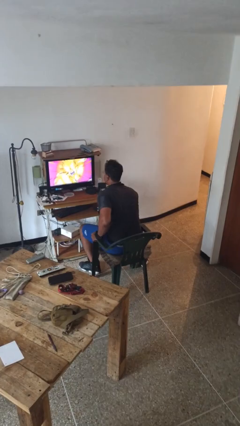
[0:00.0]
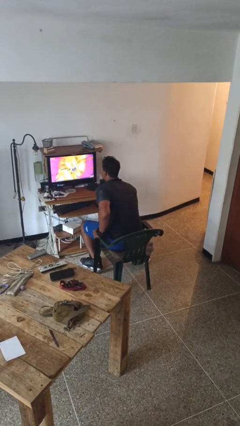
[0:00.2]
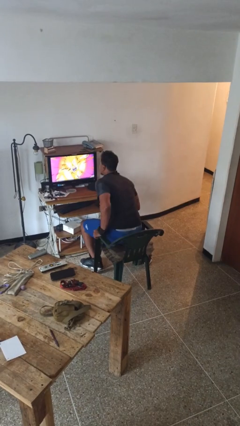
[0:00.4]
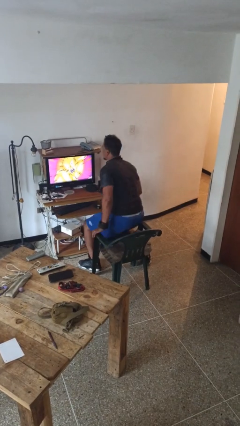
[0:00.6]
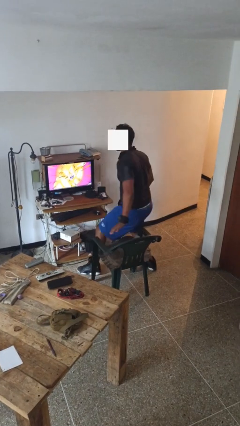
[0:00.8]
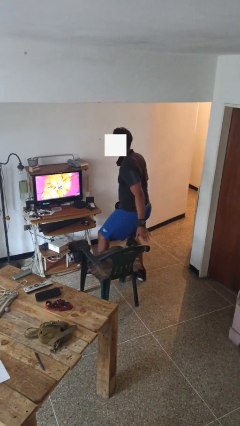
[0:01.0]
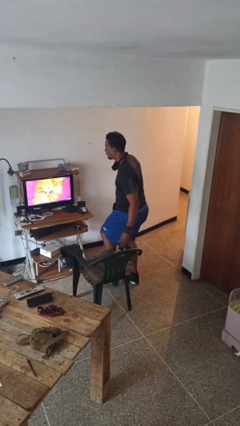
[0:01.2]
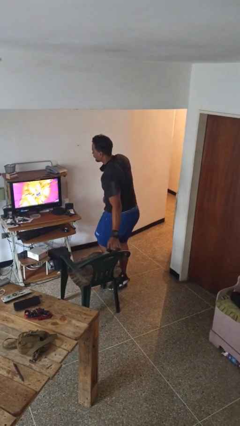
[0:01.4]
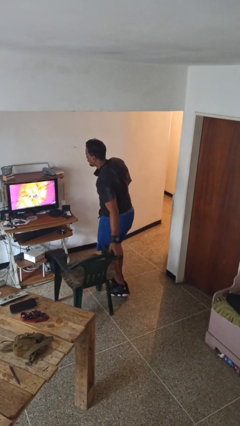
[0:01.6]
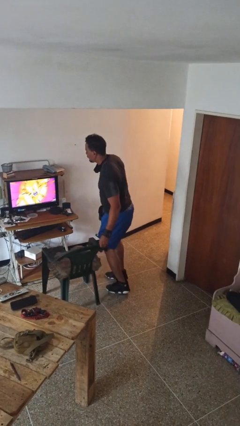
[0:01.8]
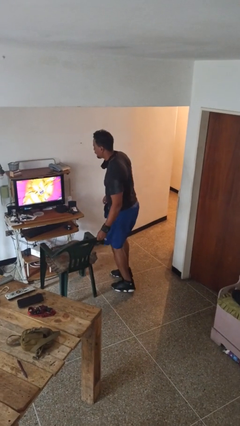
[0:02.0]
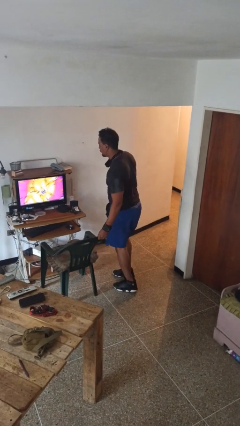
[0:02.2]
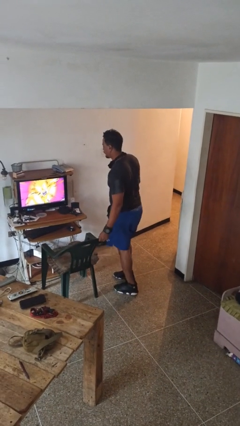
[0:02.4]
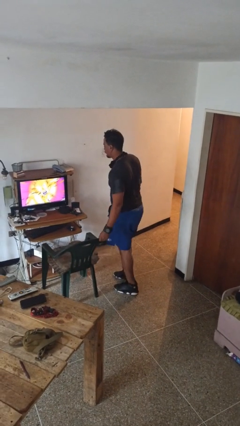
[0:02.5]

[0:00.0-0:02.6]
person stands up

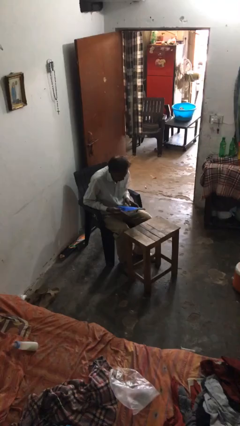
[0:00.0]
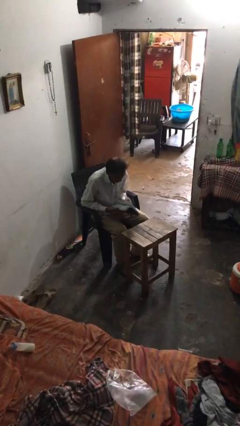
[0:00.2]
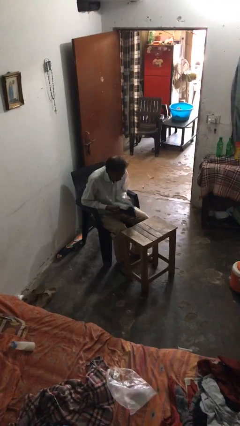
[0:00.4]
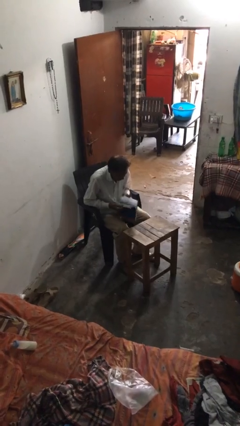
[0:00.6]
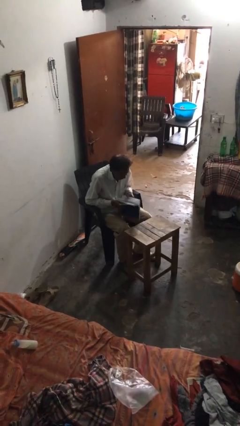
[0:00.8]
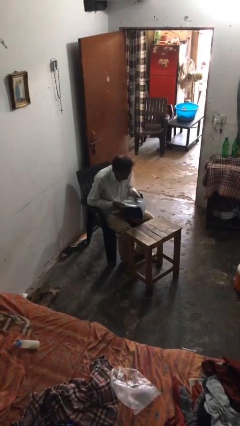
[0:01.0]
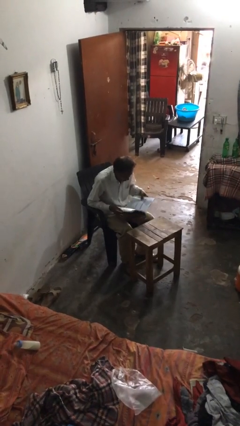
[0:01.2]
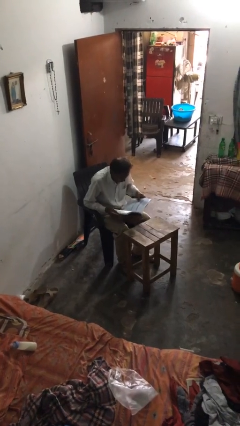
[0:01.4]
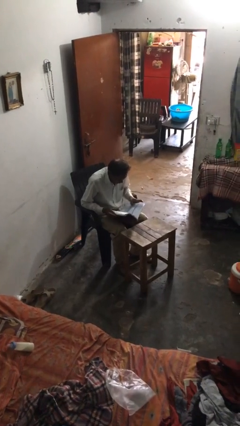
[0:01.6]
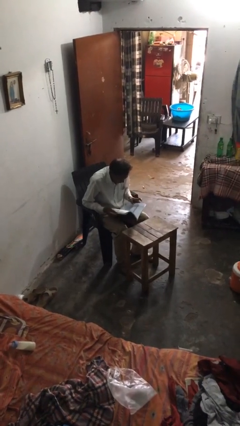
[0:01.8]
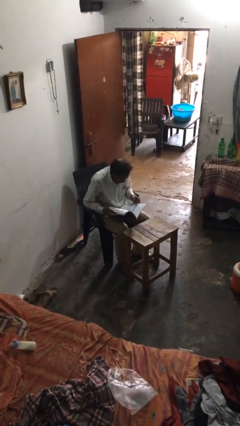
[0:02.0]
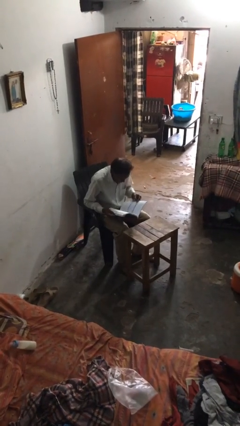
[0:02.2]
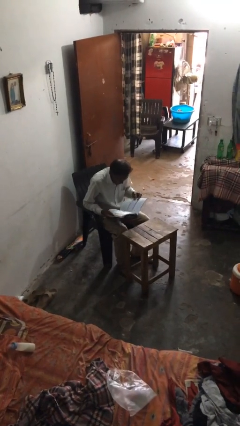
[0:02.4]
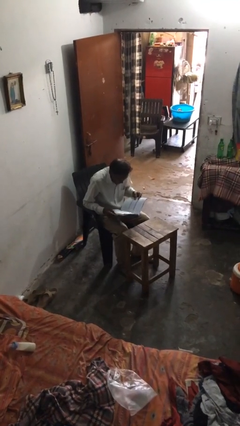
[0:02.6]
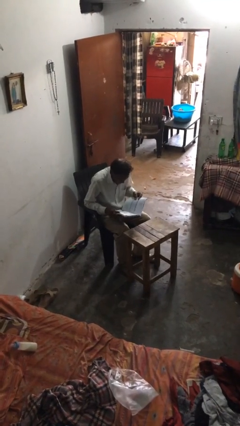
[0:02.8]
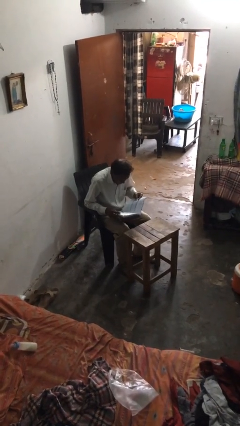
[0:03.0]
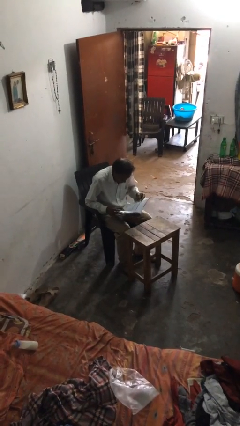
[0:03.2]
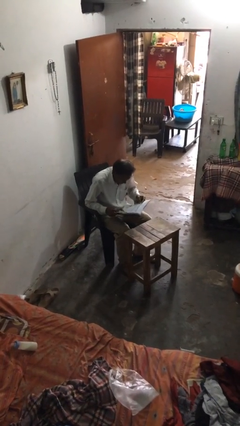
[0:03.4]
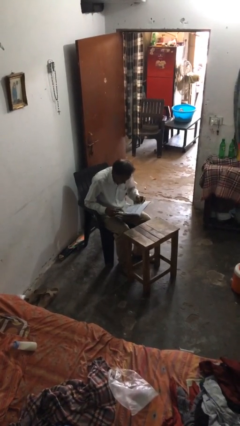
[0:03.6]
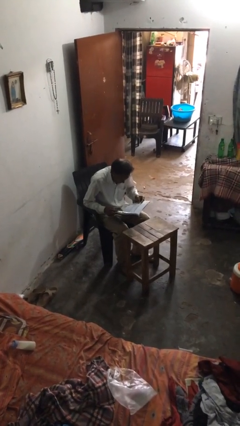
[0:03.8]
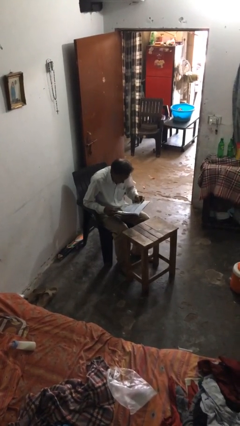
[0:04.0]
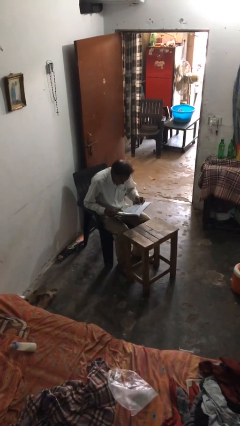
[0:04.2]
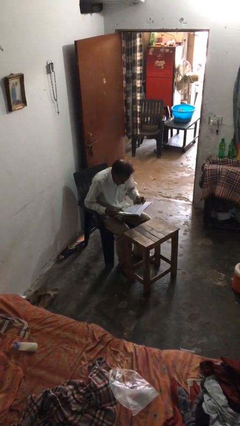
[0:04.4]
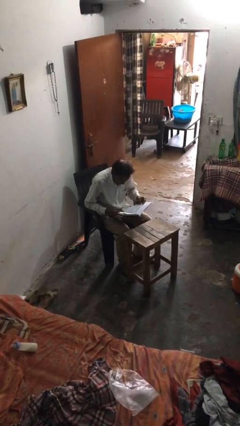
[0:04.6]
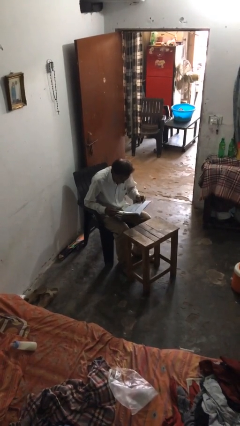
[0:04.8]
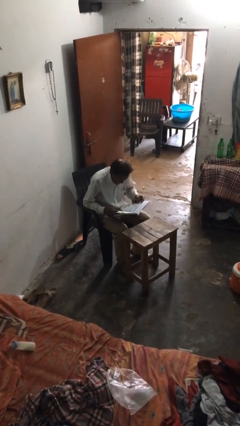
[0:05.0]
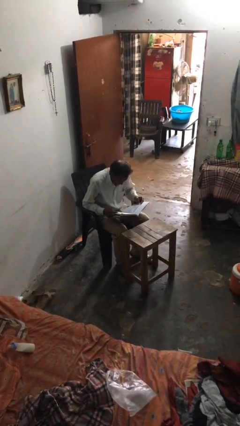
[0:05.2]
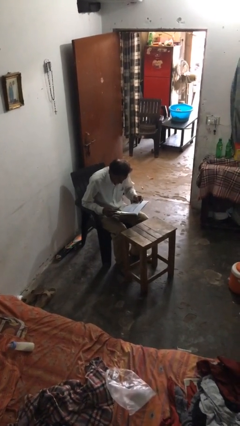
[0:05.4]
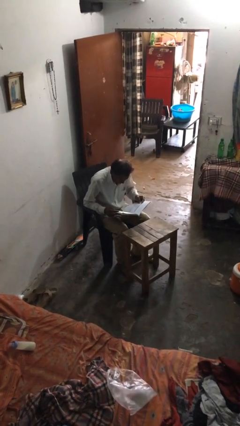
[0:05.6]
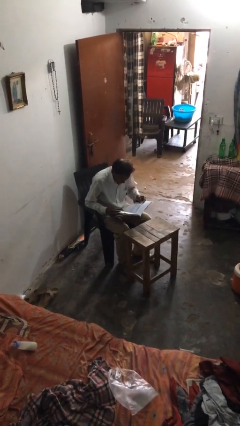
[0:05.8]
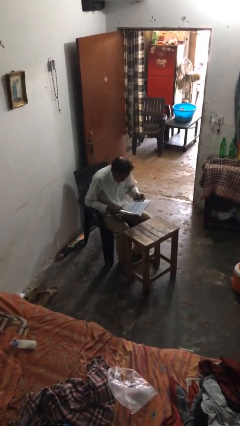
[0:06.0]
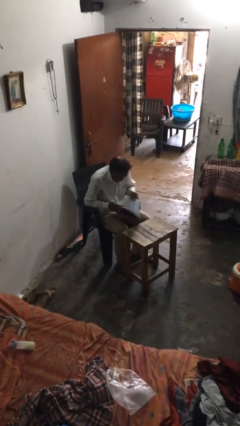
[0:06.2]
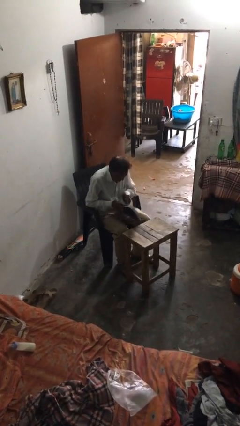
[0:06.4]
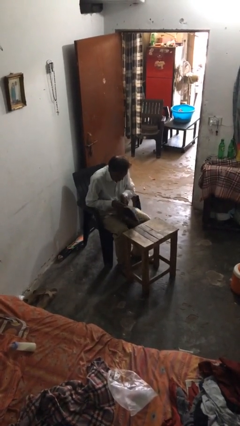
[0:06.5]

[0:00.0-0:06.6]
person reads document

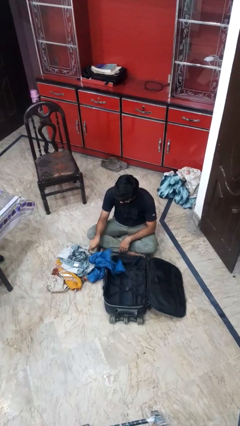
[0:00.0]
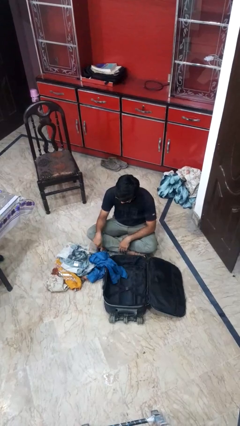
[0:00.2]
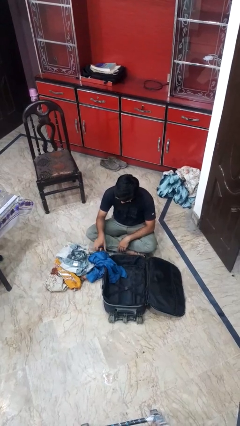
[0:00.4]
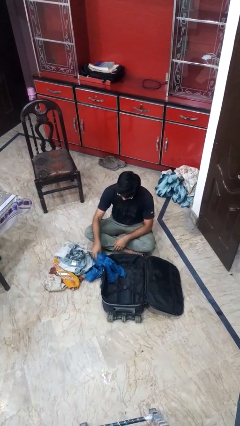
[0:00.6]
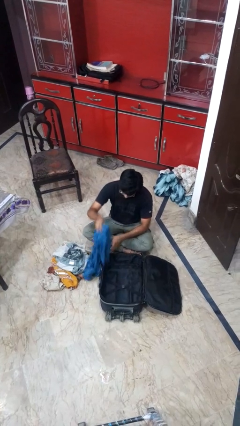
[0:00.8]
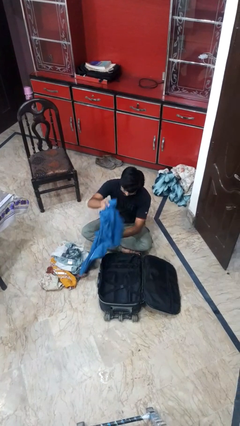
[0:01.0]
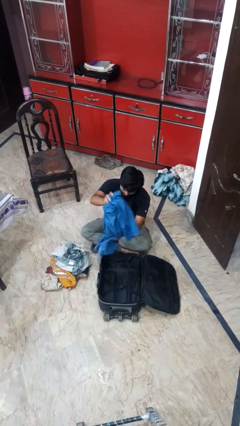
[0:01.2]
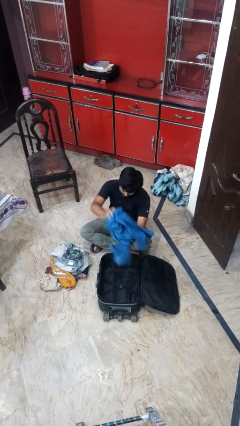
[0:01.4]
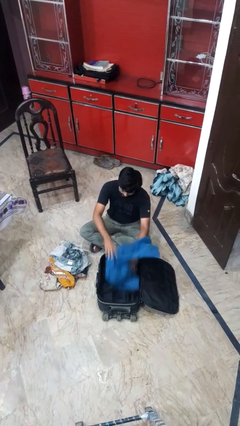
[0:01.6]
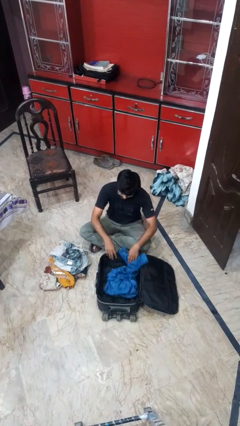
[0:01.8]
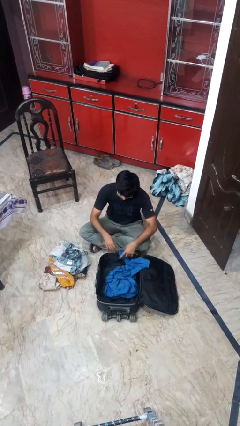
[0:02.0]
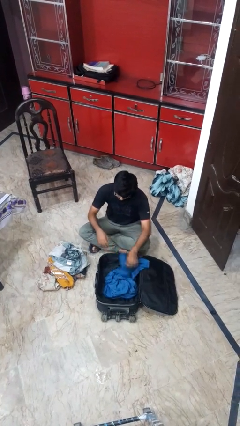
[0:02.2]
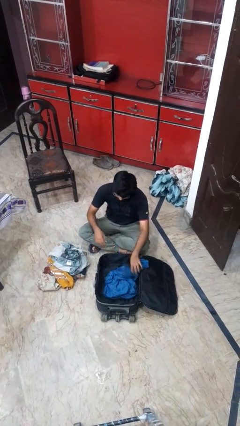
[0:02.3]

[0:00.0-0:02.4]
person loads clothes into suitcase

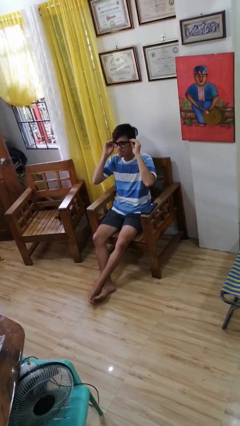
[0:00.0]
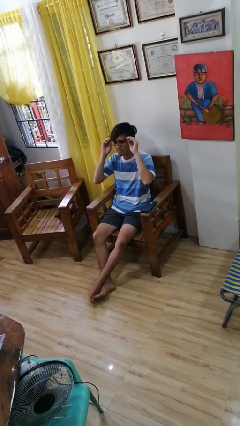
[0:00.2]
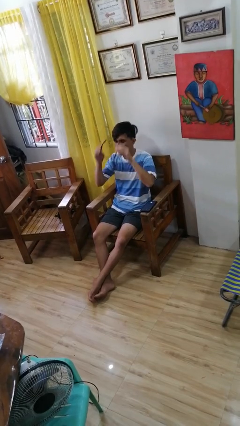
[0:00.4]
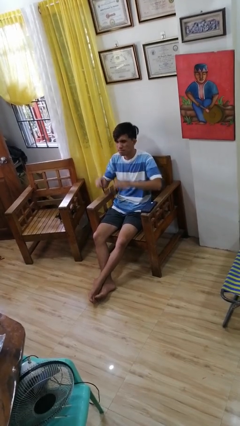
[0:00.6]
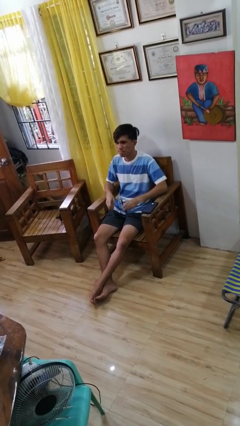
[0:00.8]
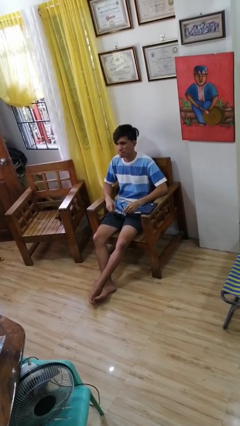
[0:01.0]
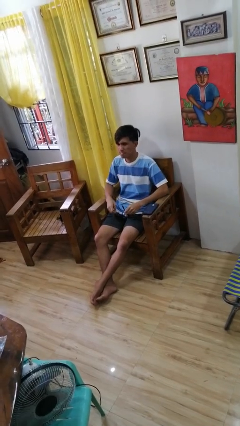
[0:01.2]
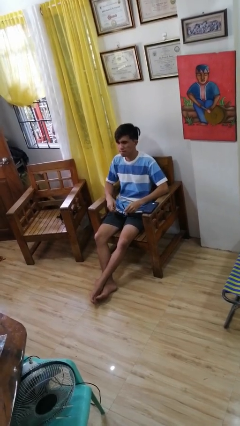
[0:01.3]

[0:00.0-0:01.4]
person takes off glasses

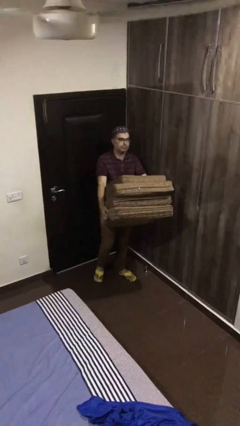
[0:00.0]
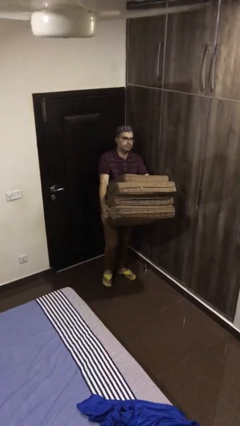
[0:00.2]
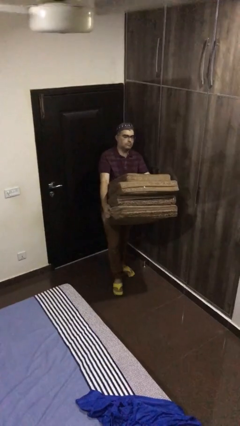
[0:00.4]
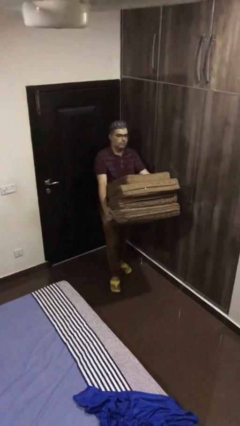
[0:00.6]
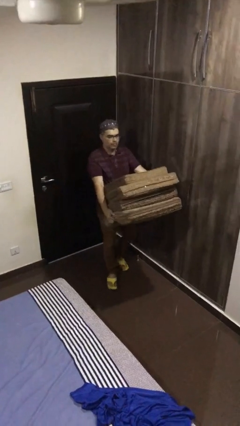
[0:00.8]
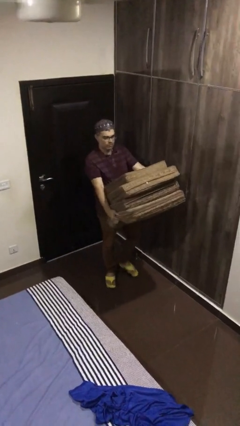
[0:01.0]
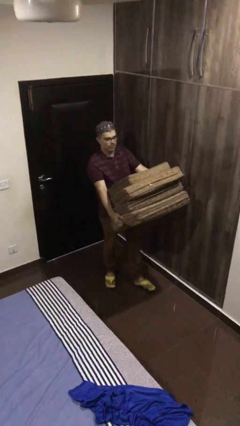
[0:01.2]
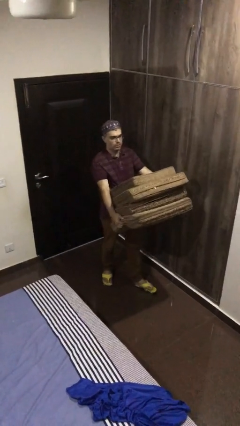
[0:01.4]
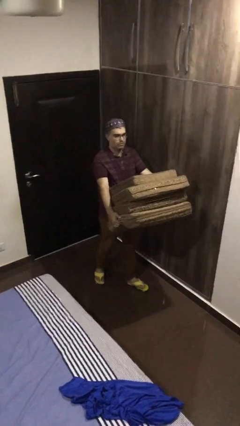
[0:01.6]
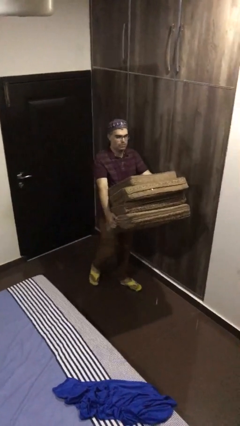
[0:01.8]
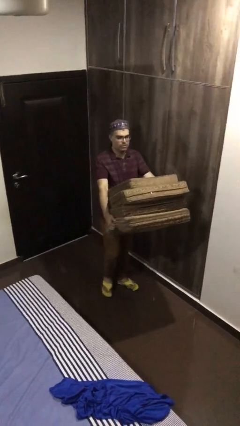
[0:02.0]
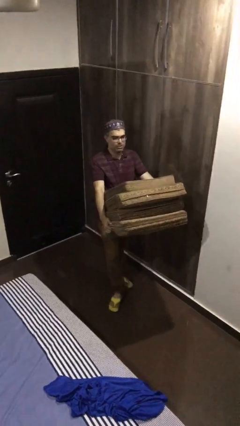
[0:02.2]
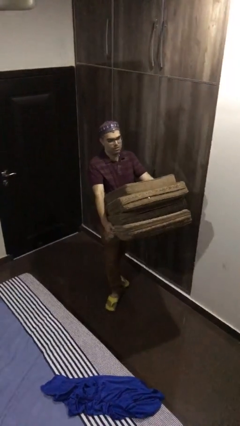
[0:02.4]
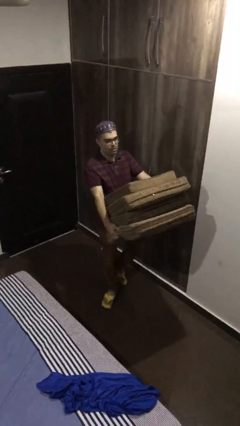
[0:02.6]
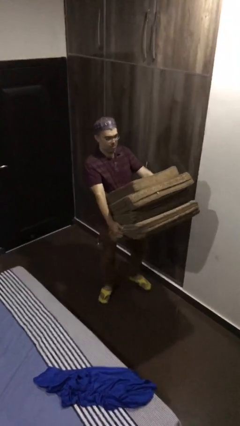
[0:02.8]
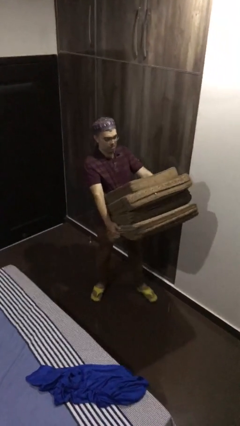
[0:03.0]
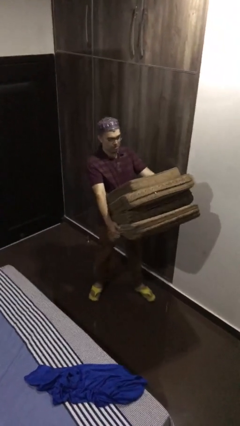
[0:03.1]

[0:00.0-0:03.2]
person carries heavy object

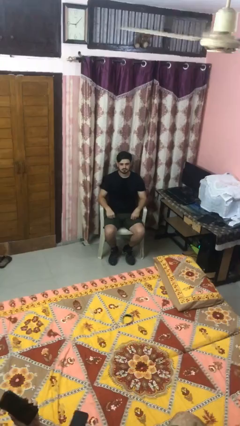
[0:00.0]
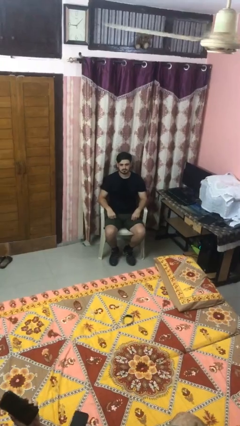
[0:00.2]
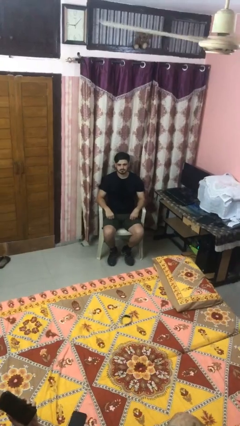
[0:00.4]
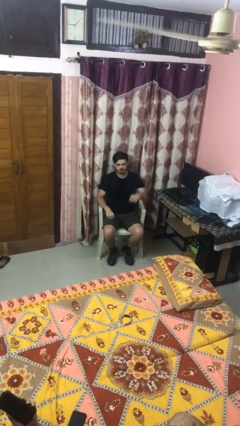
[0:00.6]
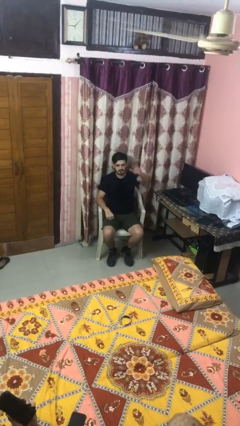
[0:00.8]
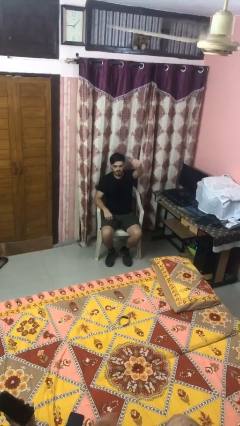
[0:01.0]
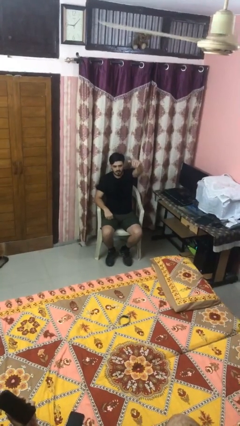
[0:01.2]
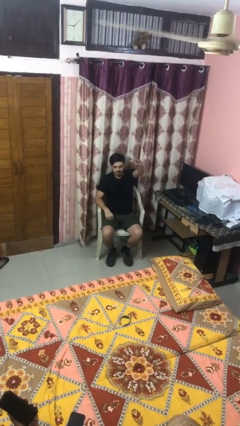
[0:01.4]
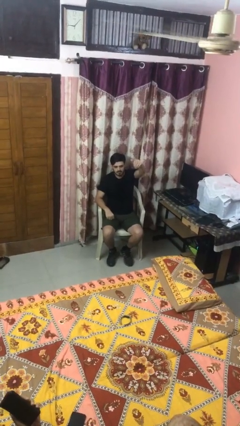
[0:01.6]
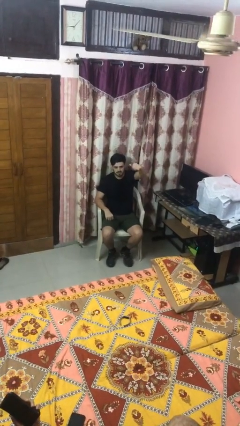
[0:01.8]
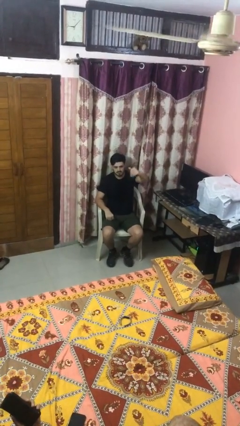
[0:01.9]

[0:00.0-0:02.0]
person gestures come here
